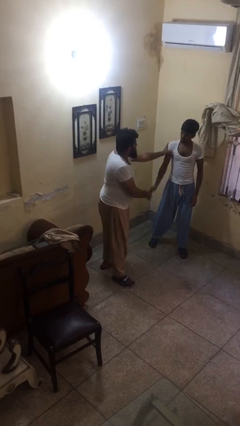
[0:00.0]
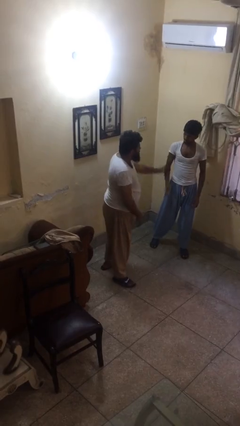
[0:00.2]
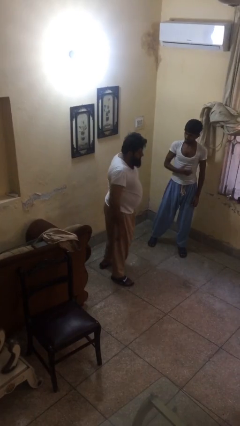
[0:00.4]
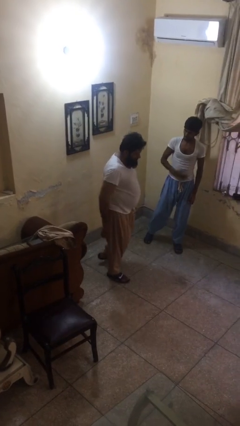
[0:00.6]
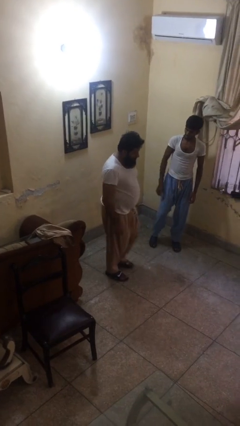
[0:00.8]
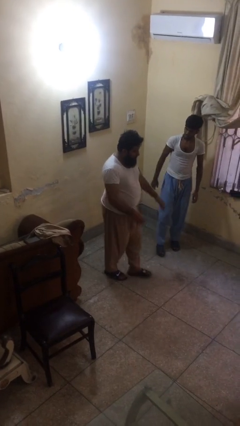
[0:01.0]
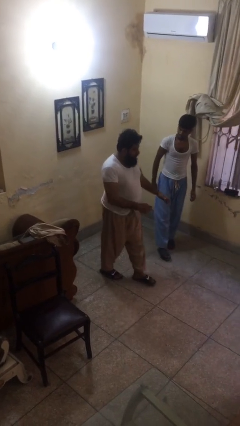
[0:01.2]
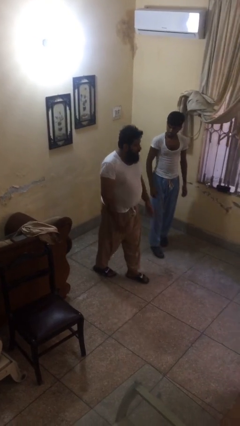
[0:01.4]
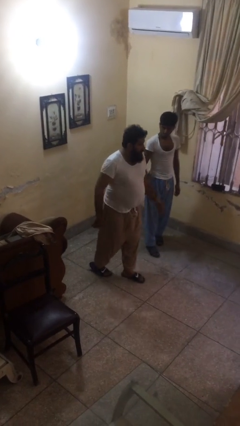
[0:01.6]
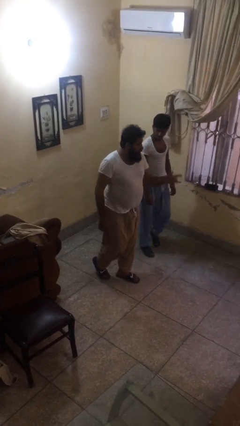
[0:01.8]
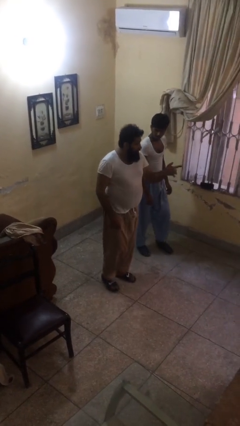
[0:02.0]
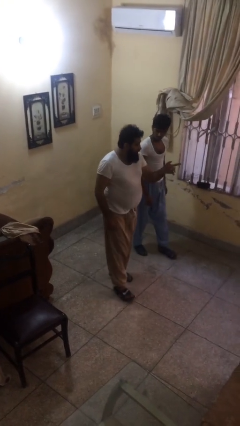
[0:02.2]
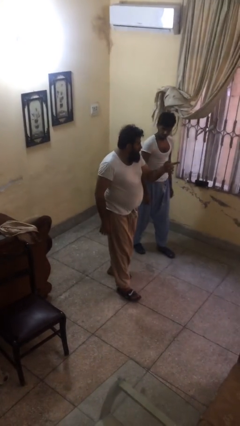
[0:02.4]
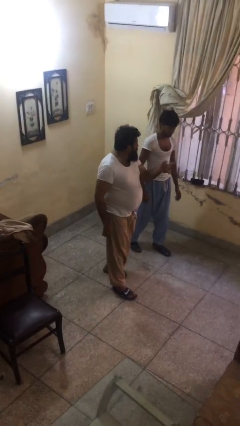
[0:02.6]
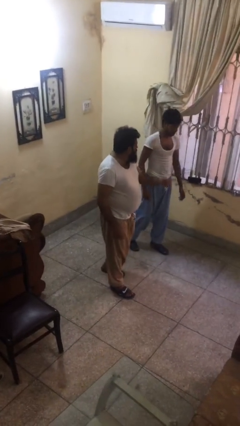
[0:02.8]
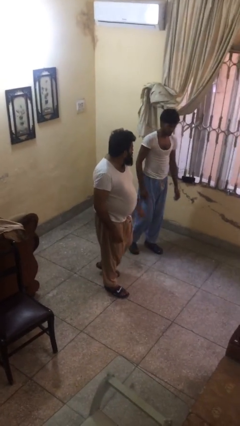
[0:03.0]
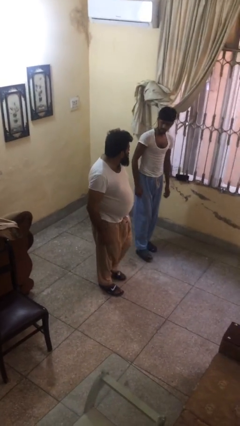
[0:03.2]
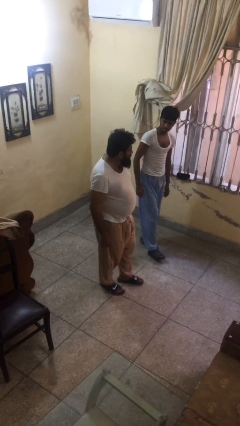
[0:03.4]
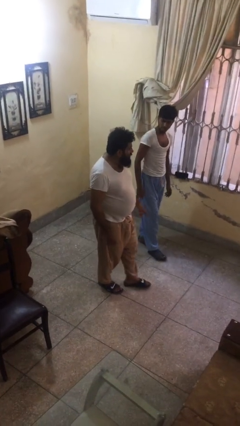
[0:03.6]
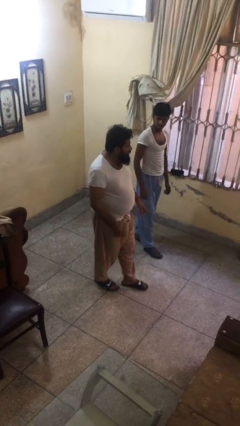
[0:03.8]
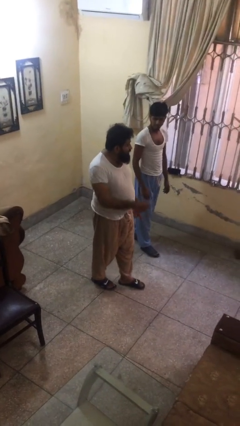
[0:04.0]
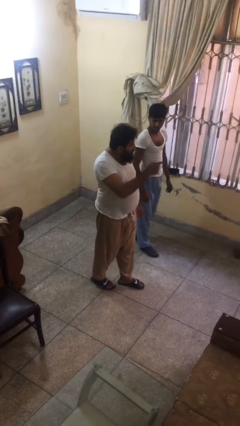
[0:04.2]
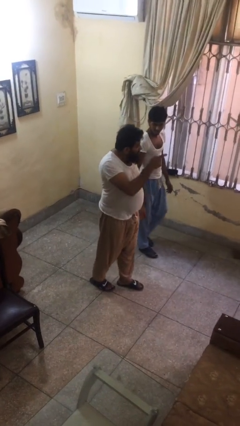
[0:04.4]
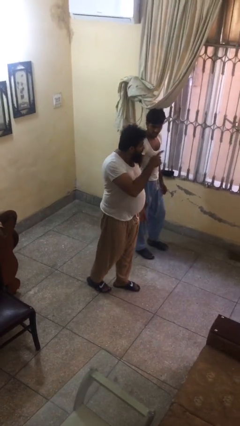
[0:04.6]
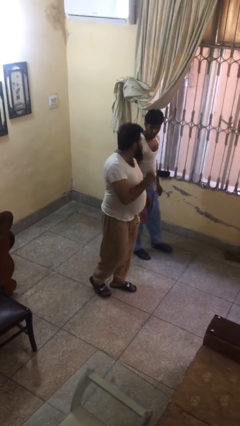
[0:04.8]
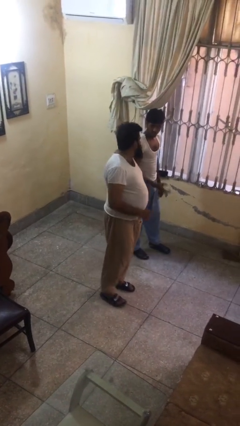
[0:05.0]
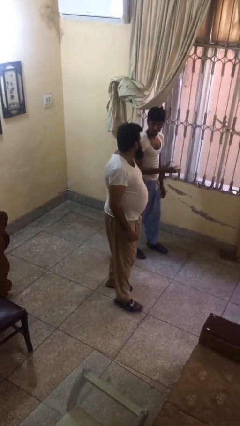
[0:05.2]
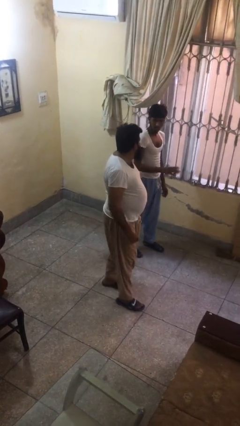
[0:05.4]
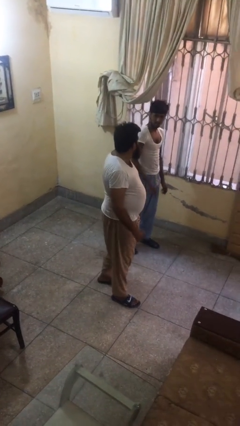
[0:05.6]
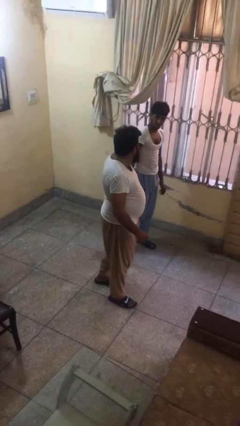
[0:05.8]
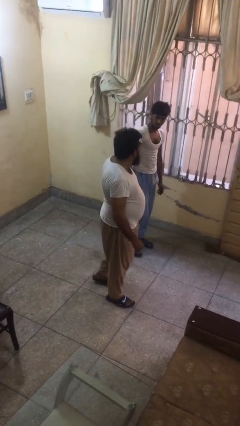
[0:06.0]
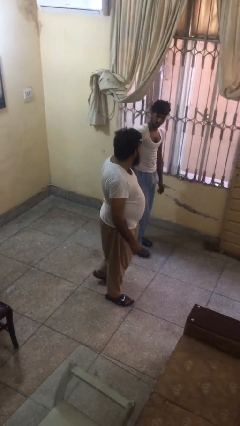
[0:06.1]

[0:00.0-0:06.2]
person talks to person

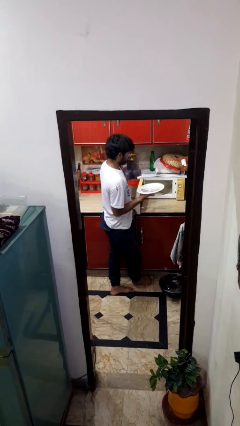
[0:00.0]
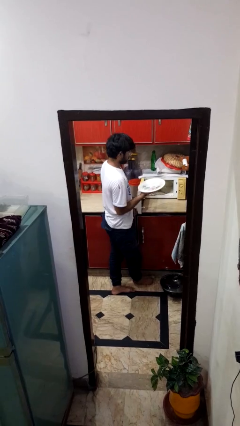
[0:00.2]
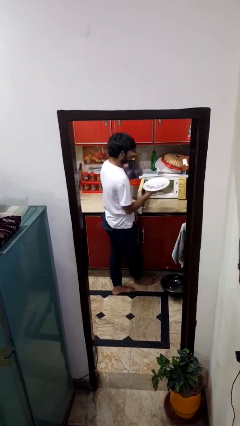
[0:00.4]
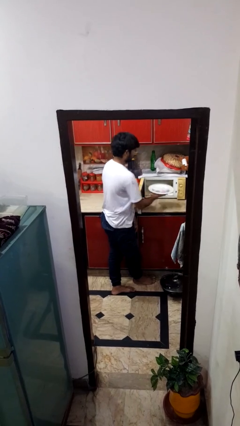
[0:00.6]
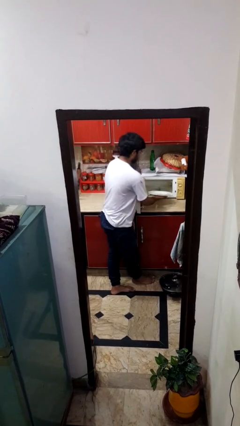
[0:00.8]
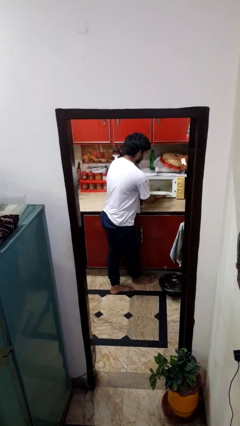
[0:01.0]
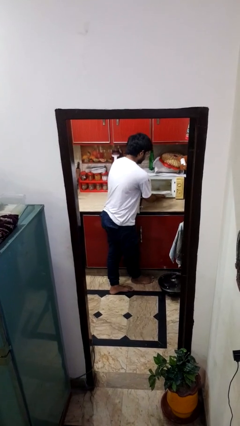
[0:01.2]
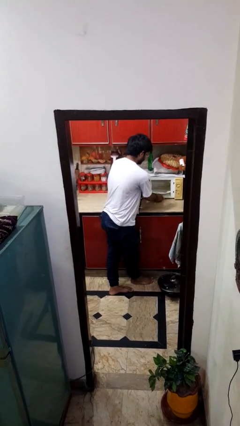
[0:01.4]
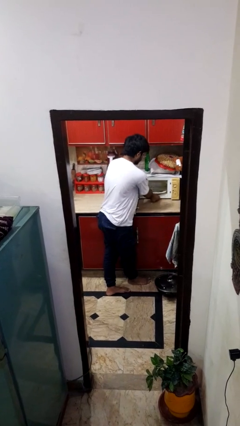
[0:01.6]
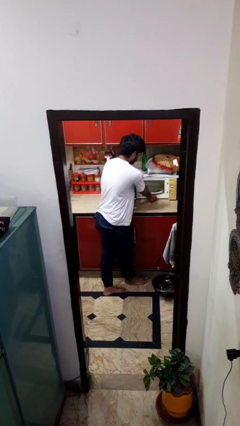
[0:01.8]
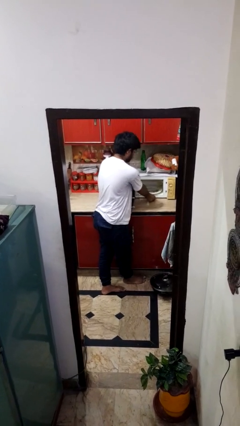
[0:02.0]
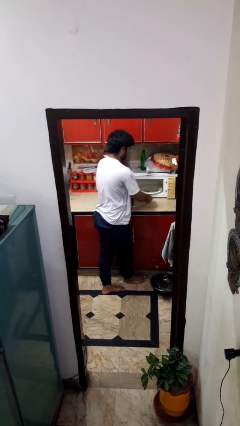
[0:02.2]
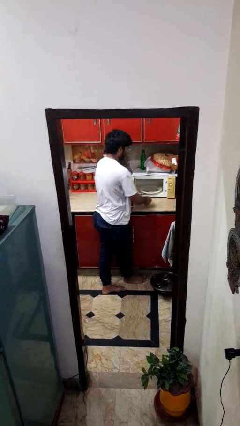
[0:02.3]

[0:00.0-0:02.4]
person puts object into oven

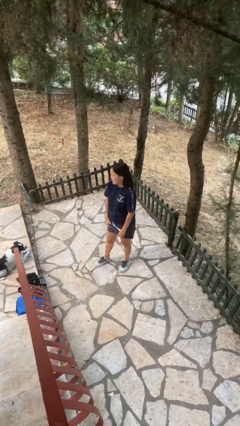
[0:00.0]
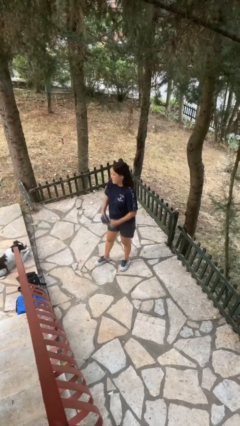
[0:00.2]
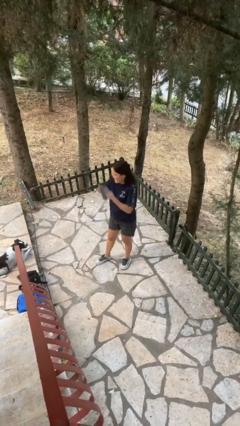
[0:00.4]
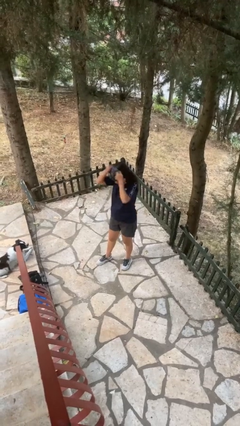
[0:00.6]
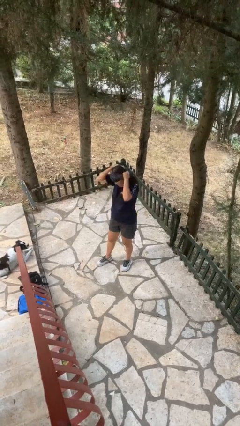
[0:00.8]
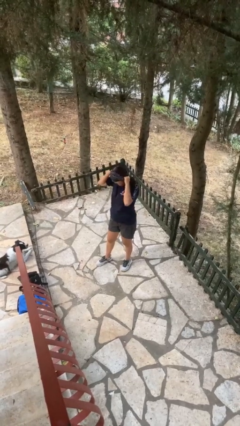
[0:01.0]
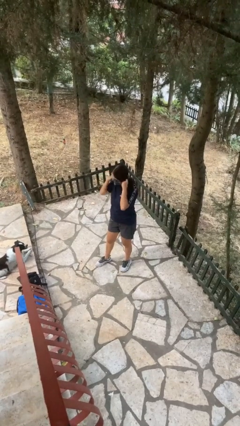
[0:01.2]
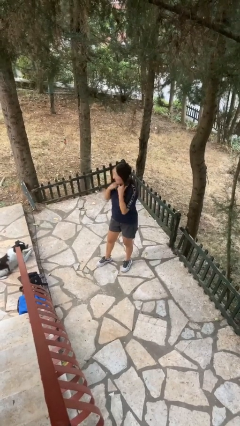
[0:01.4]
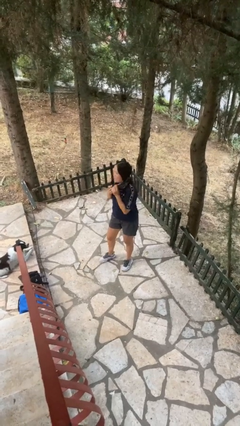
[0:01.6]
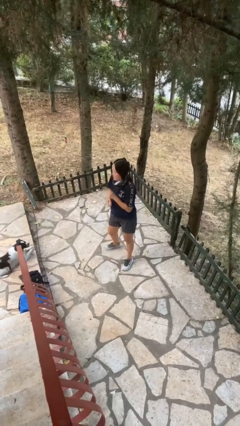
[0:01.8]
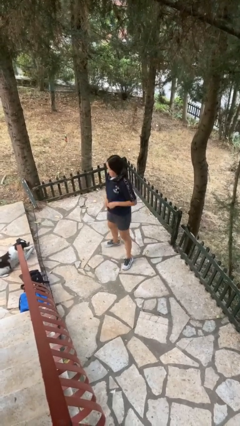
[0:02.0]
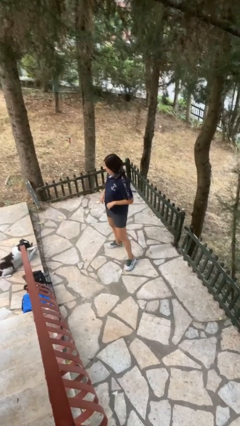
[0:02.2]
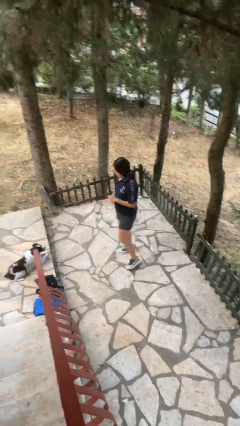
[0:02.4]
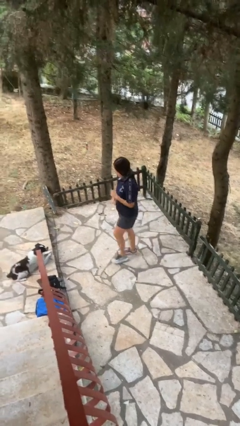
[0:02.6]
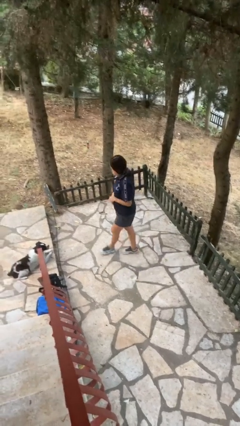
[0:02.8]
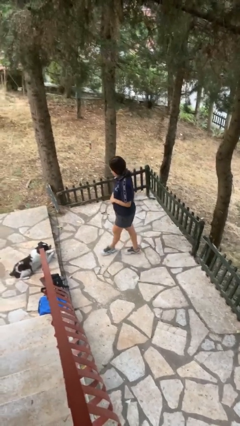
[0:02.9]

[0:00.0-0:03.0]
person puts on scarf

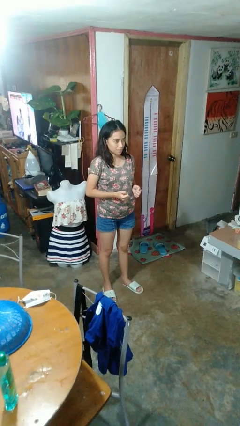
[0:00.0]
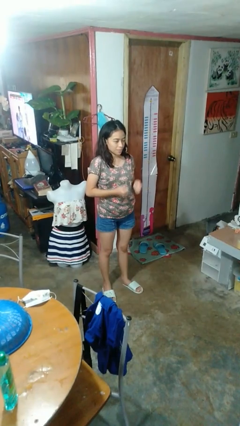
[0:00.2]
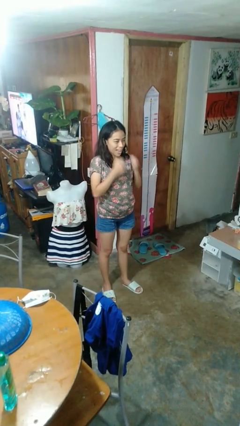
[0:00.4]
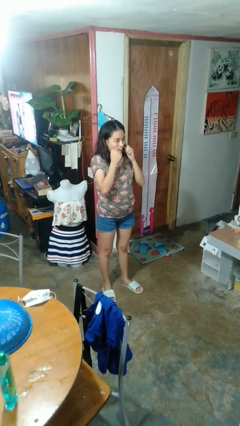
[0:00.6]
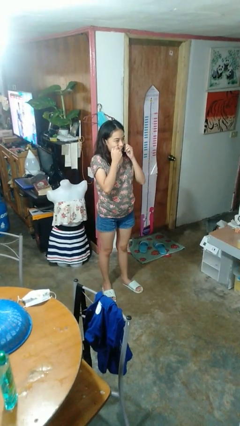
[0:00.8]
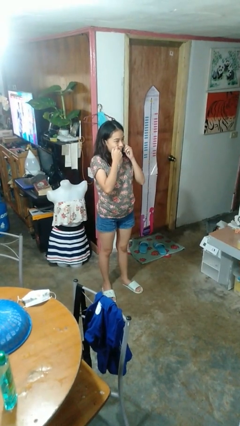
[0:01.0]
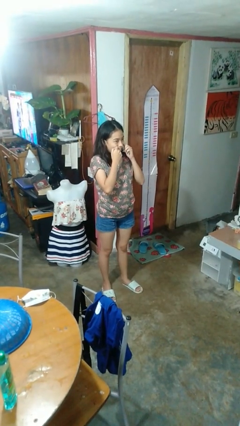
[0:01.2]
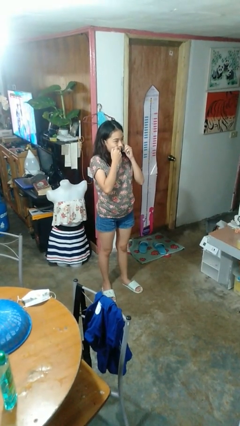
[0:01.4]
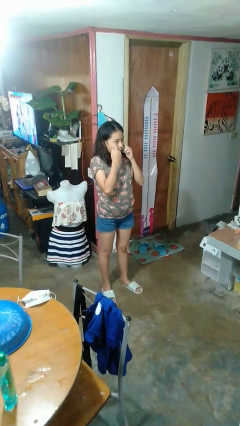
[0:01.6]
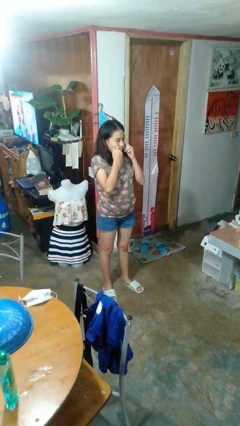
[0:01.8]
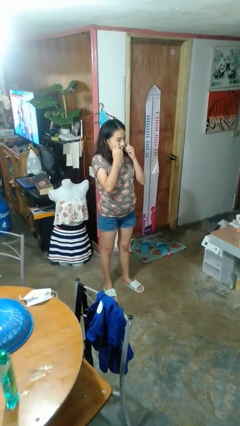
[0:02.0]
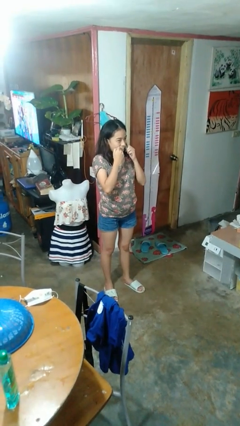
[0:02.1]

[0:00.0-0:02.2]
person flosses

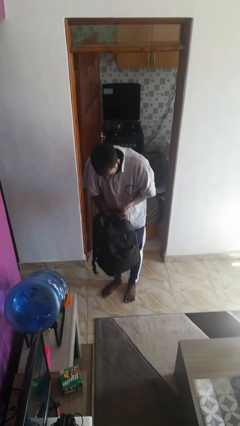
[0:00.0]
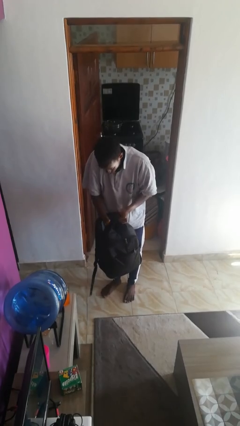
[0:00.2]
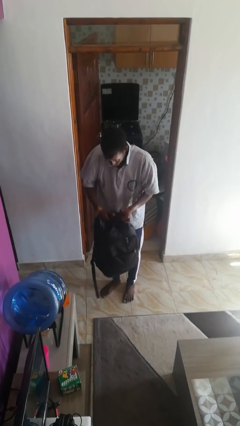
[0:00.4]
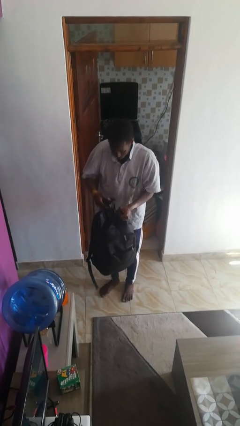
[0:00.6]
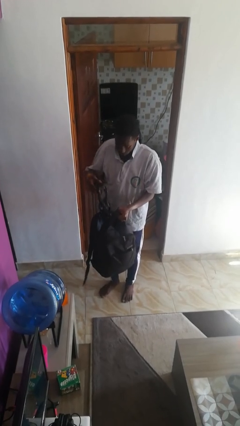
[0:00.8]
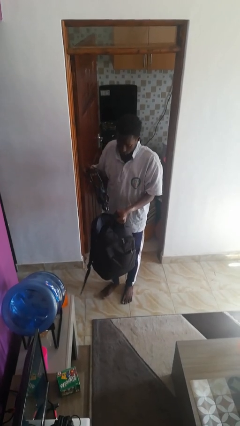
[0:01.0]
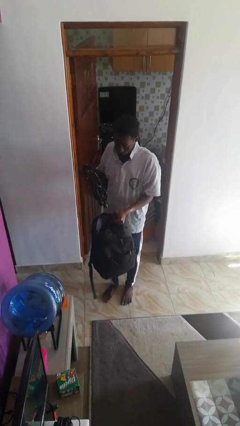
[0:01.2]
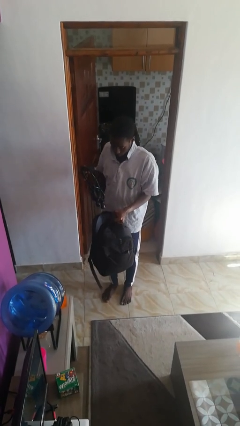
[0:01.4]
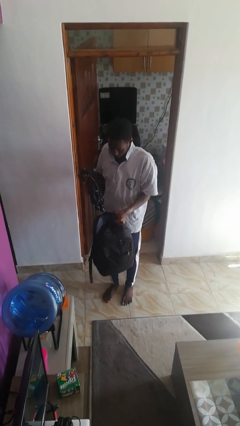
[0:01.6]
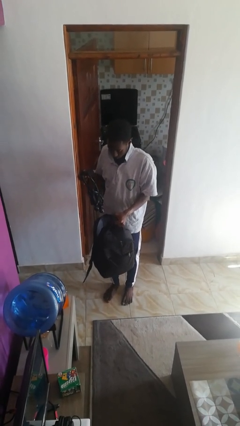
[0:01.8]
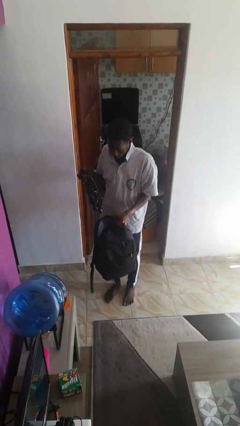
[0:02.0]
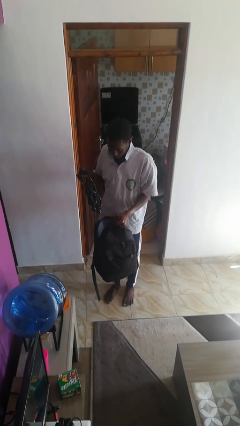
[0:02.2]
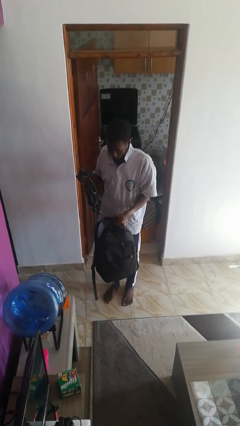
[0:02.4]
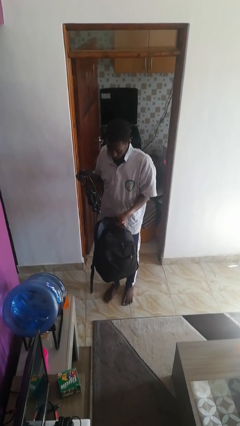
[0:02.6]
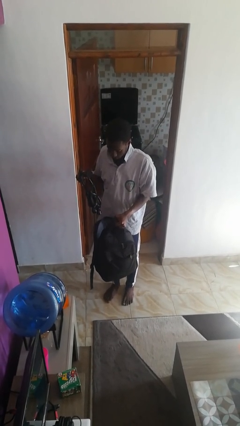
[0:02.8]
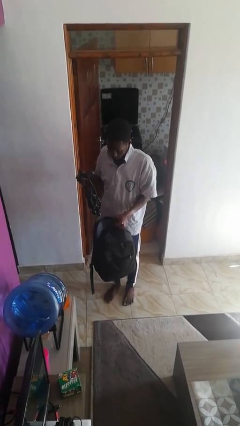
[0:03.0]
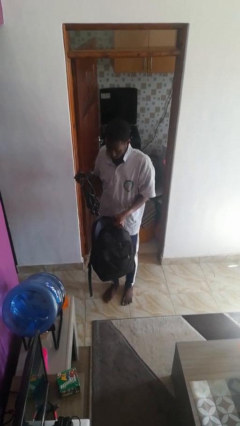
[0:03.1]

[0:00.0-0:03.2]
person takes object from backpack

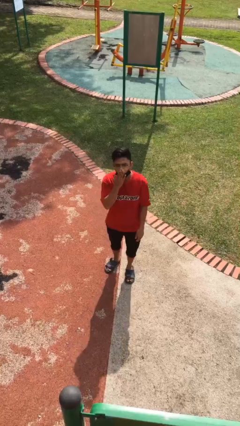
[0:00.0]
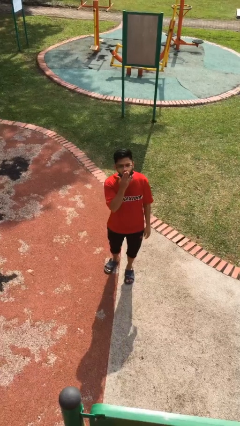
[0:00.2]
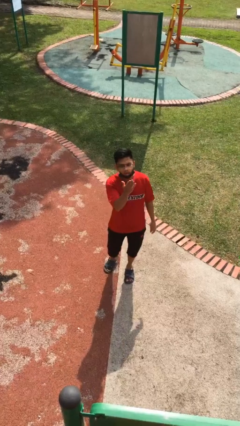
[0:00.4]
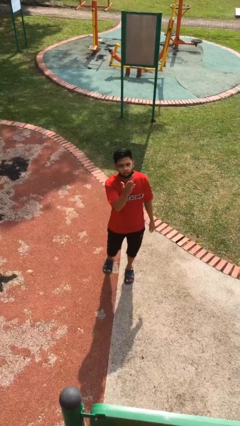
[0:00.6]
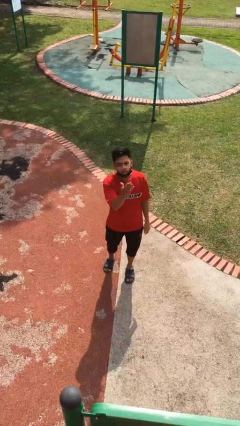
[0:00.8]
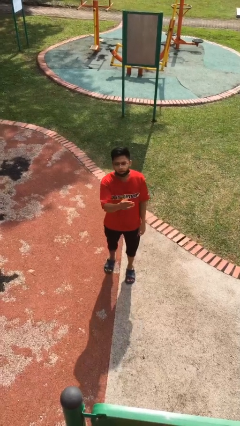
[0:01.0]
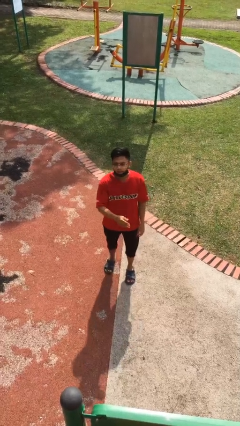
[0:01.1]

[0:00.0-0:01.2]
person gestures blow kiss
